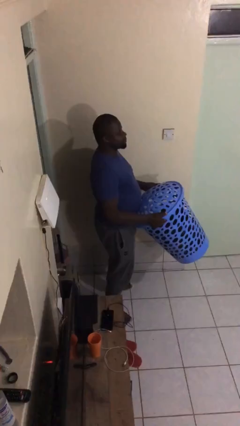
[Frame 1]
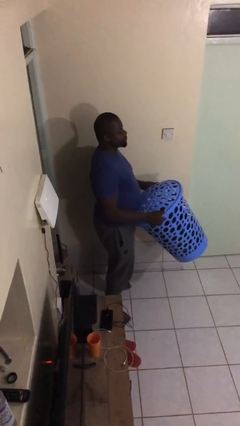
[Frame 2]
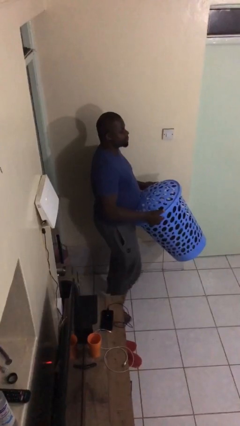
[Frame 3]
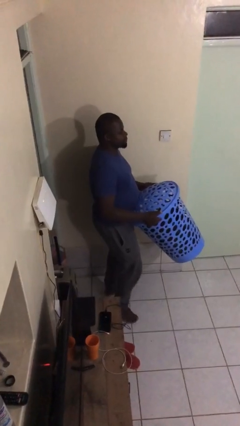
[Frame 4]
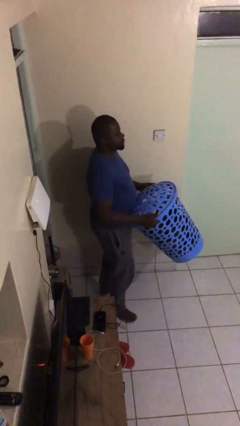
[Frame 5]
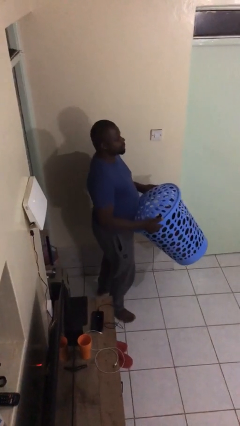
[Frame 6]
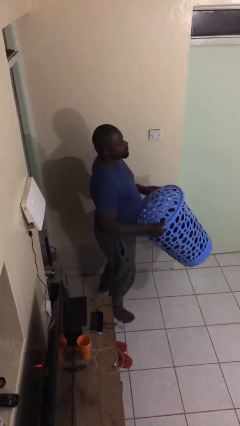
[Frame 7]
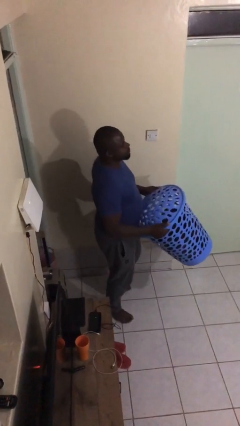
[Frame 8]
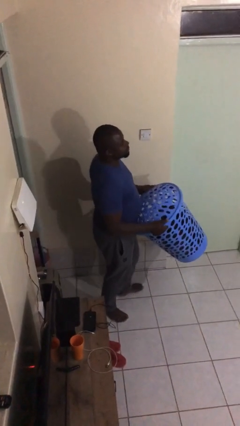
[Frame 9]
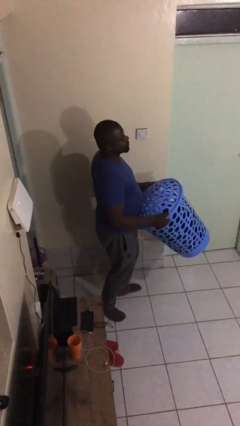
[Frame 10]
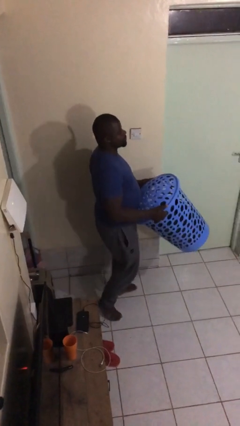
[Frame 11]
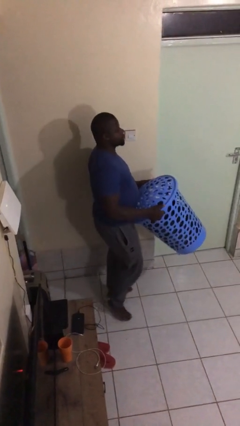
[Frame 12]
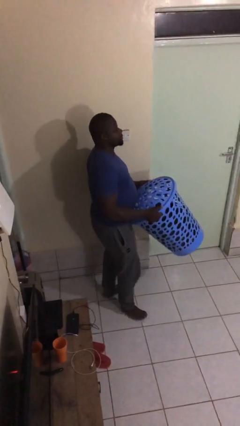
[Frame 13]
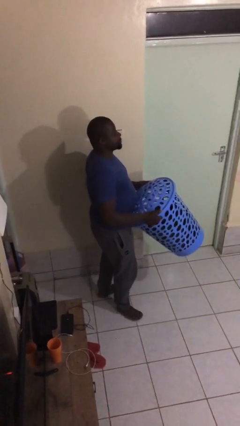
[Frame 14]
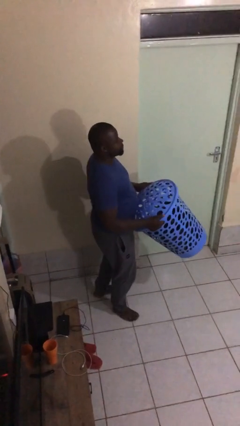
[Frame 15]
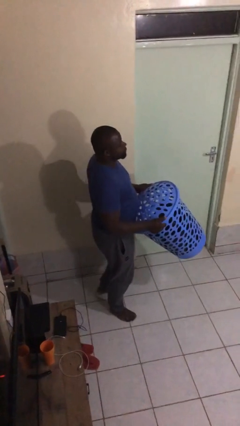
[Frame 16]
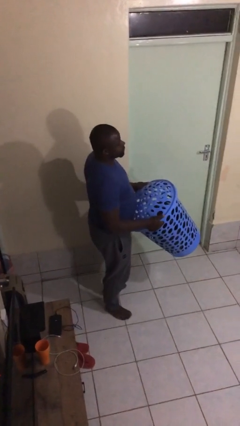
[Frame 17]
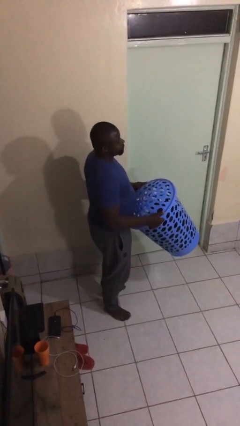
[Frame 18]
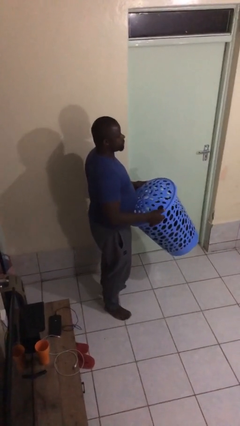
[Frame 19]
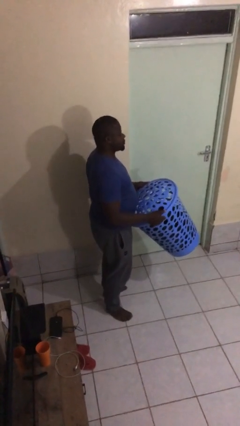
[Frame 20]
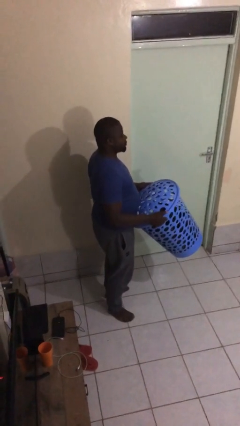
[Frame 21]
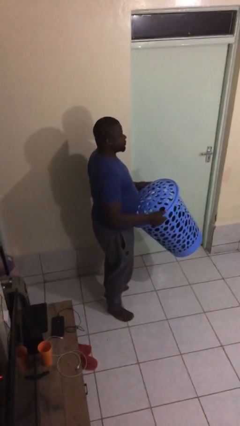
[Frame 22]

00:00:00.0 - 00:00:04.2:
person carries laundry basket

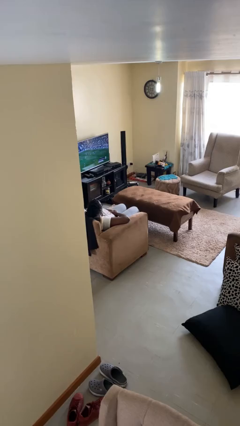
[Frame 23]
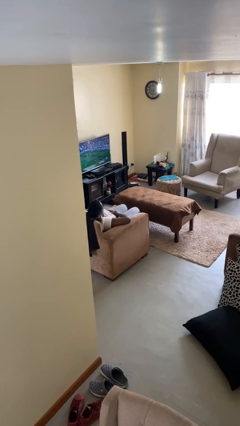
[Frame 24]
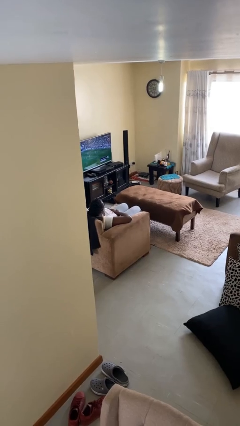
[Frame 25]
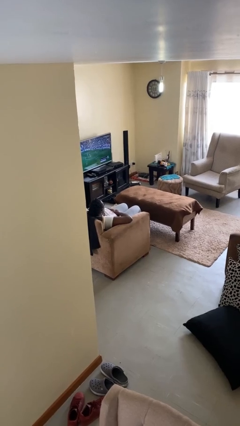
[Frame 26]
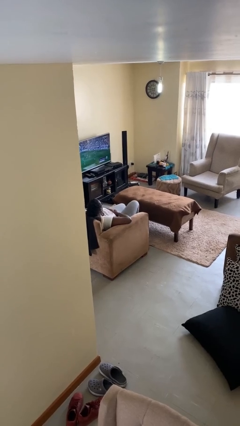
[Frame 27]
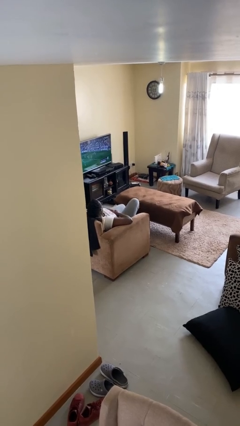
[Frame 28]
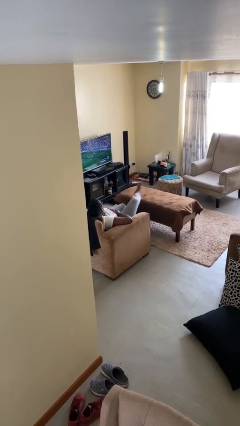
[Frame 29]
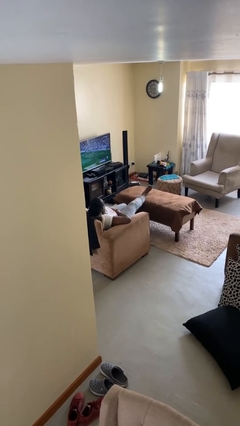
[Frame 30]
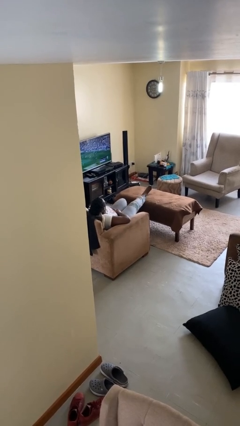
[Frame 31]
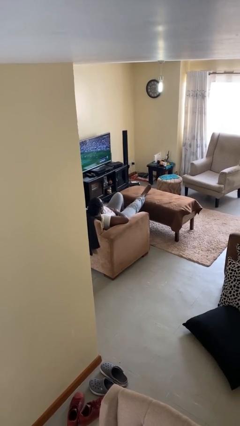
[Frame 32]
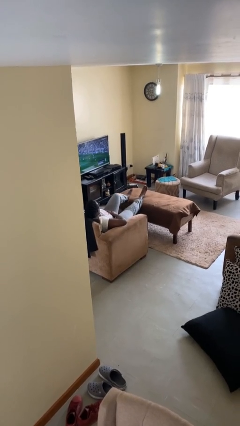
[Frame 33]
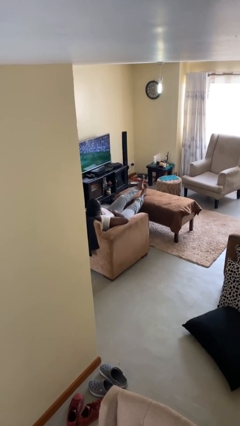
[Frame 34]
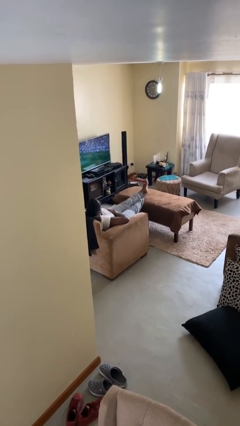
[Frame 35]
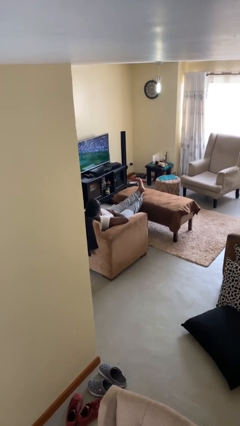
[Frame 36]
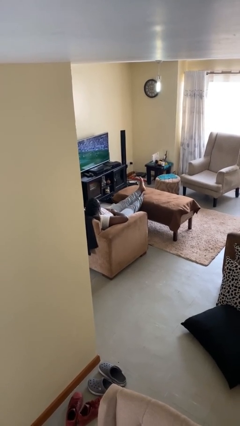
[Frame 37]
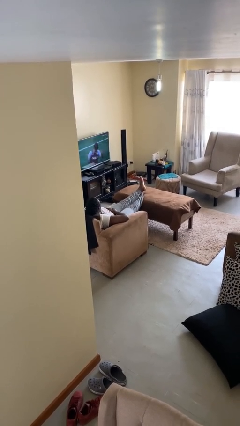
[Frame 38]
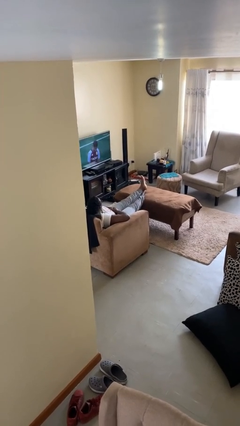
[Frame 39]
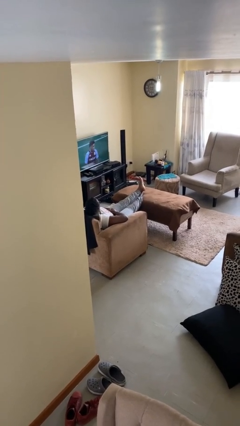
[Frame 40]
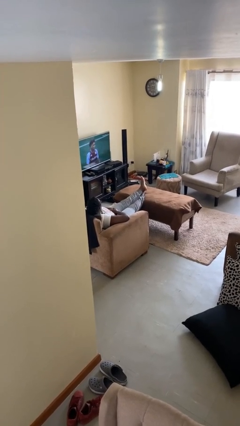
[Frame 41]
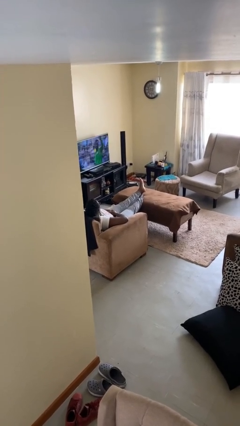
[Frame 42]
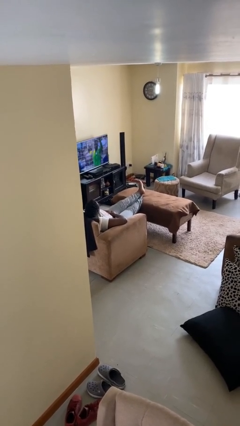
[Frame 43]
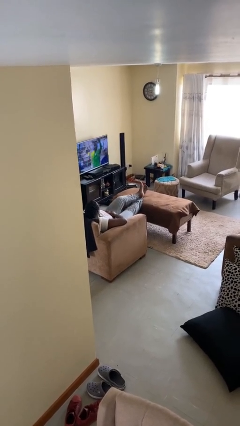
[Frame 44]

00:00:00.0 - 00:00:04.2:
person puts feet up

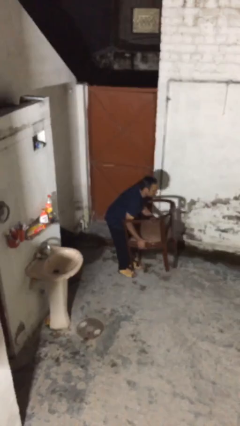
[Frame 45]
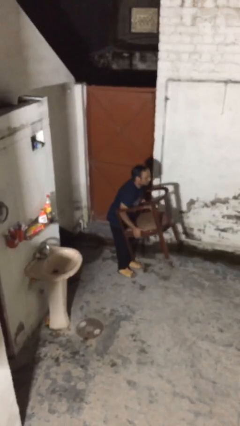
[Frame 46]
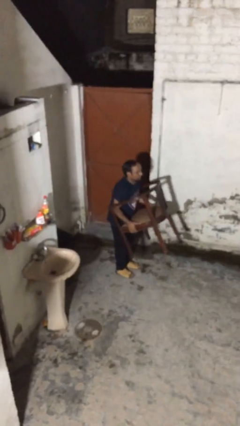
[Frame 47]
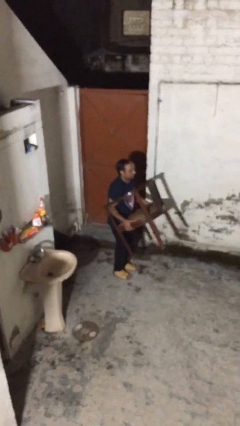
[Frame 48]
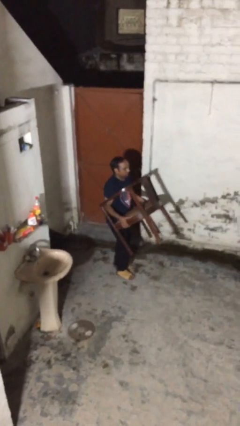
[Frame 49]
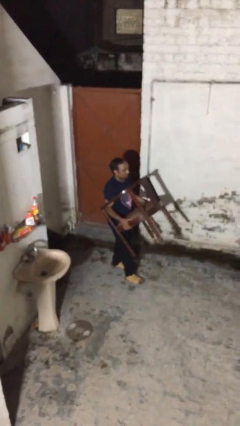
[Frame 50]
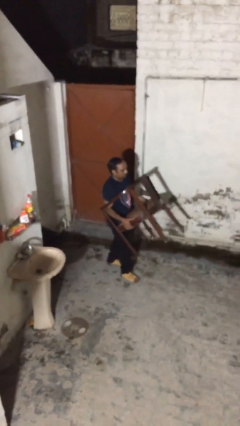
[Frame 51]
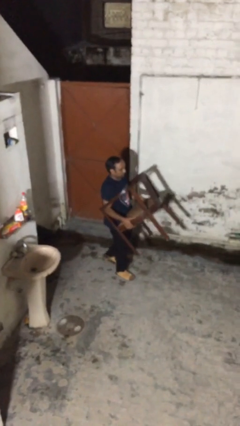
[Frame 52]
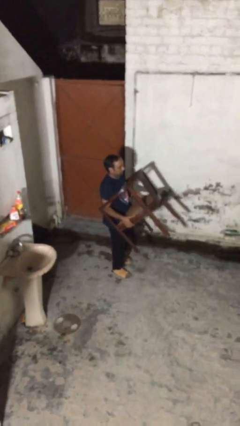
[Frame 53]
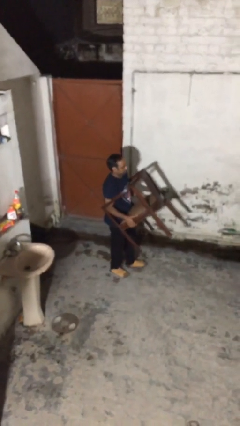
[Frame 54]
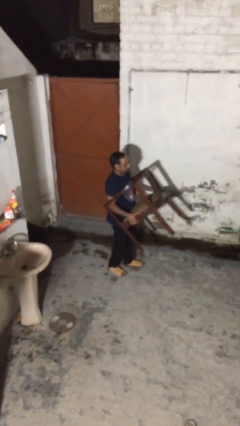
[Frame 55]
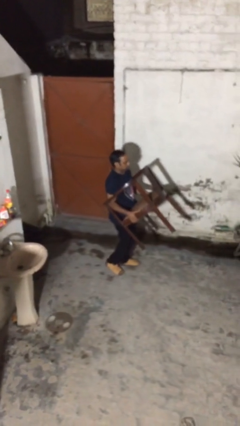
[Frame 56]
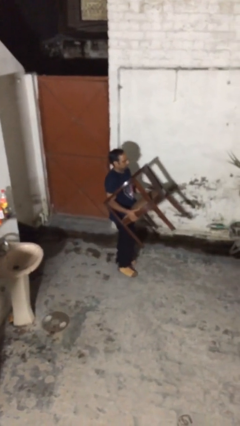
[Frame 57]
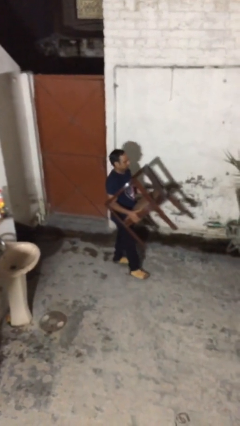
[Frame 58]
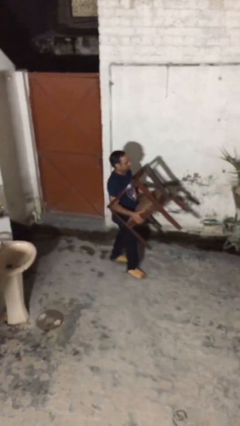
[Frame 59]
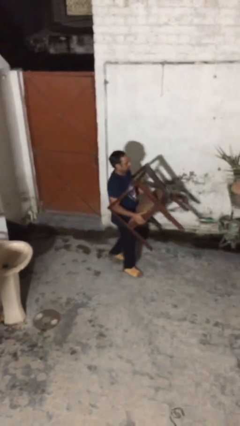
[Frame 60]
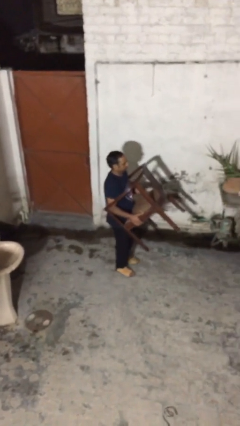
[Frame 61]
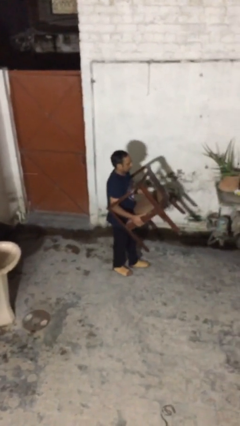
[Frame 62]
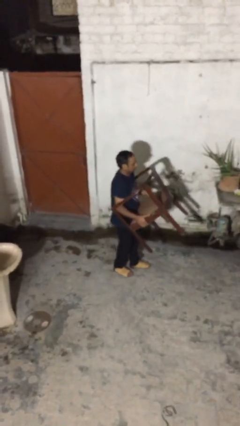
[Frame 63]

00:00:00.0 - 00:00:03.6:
person carries heavy object

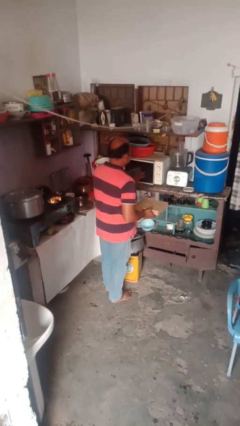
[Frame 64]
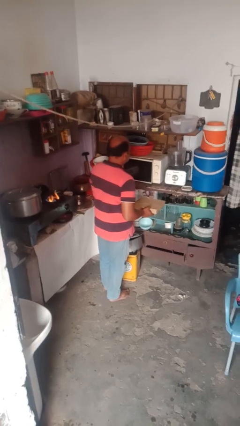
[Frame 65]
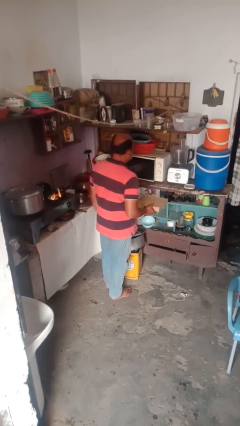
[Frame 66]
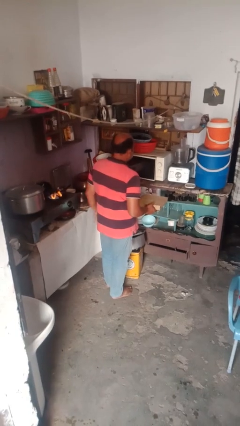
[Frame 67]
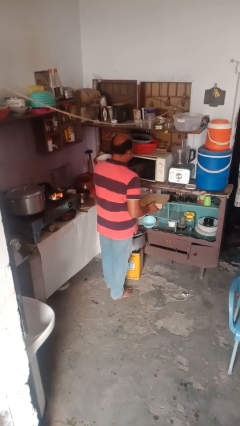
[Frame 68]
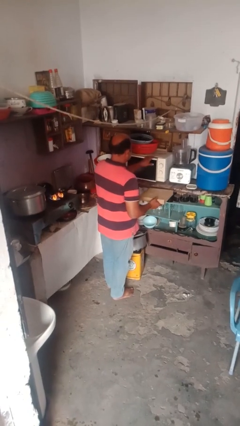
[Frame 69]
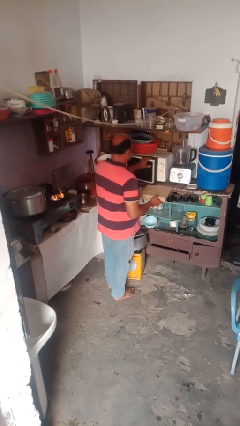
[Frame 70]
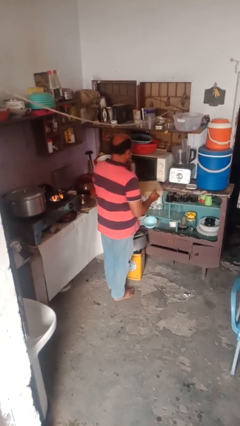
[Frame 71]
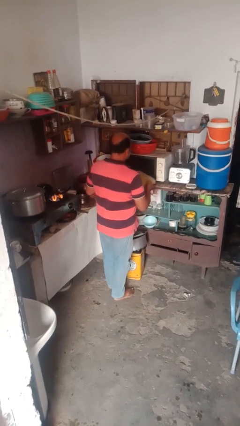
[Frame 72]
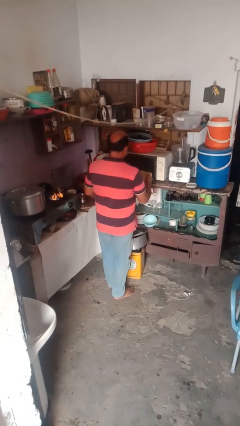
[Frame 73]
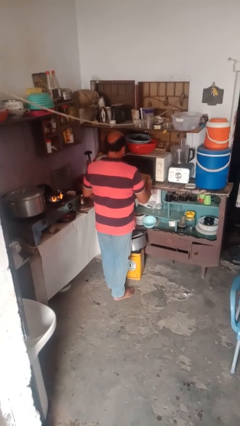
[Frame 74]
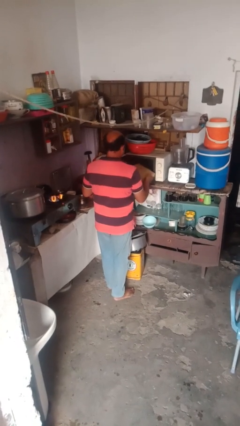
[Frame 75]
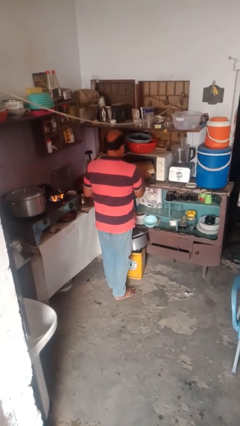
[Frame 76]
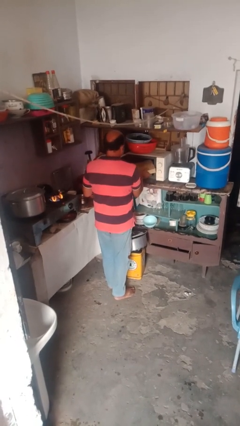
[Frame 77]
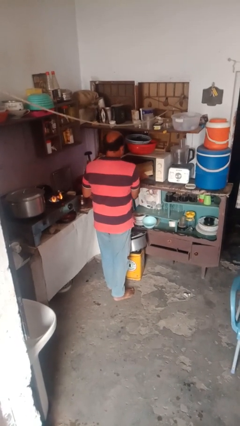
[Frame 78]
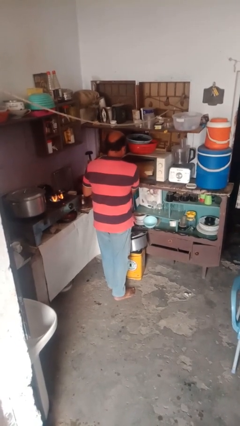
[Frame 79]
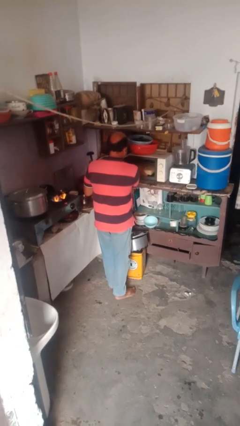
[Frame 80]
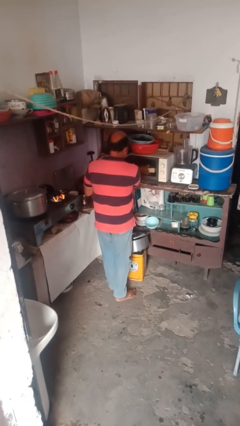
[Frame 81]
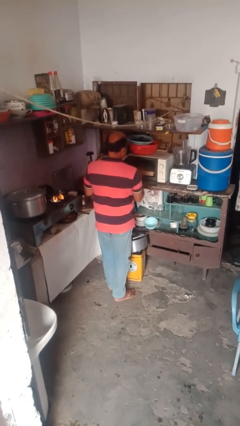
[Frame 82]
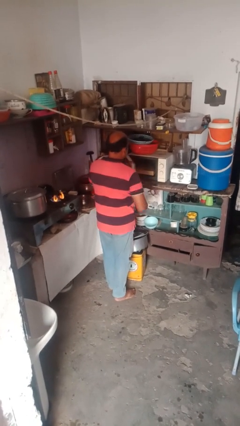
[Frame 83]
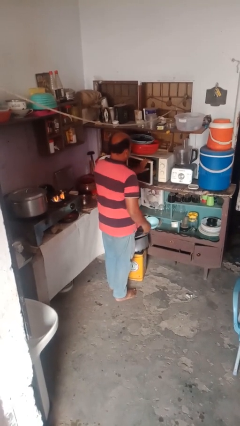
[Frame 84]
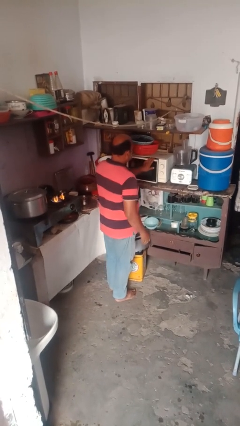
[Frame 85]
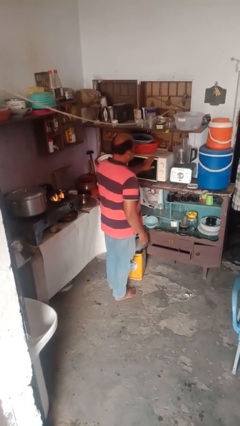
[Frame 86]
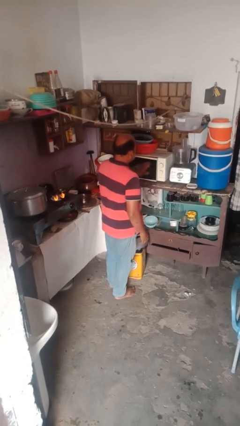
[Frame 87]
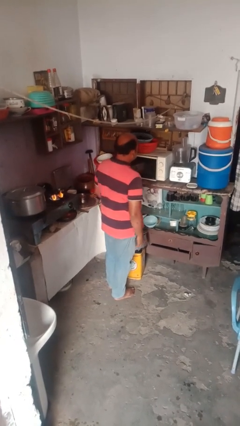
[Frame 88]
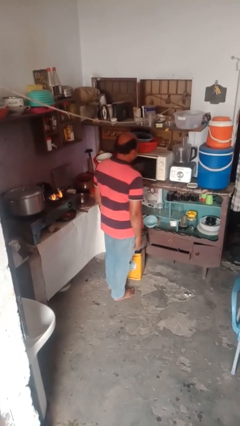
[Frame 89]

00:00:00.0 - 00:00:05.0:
person puts object into microwave

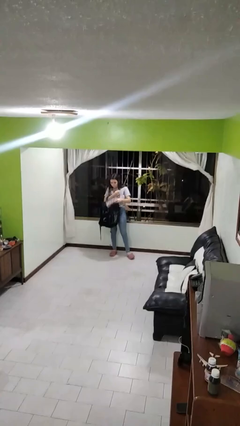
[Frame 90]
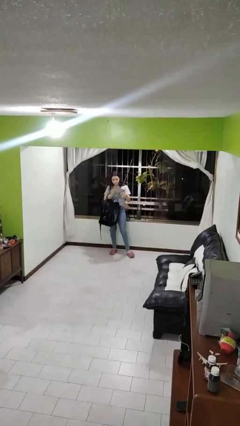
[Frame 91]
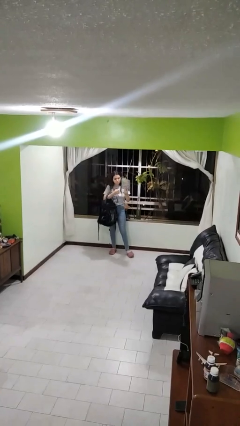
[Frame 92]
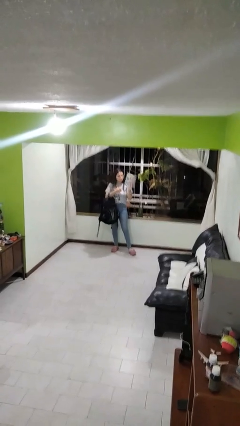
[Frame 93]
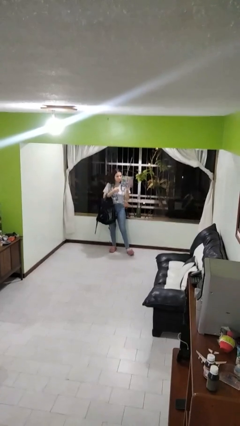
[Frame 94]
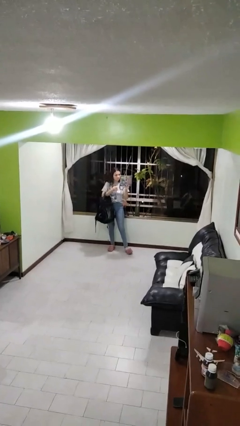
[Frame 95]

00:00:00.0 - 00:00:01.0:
person takes object from backpack
